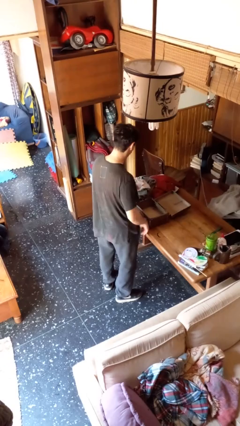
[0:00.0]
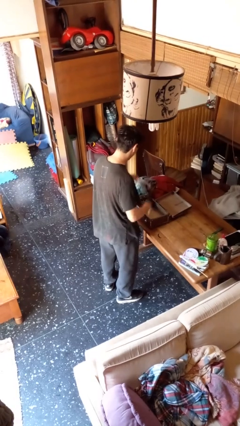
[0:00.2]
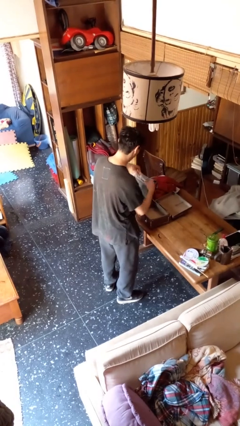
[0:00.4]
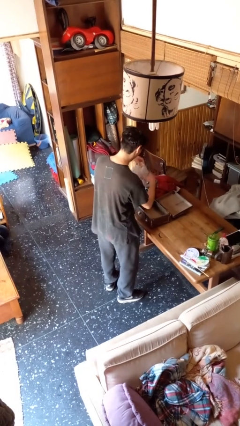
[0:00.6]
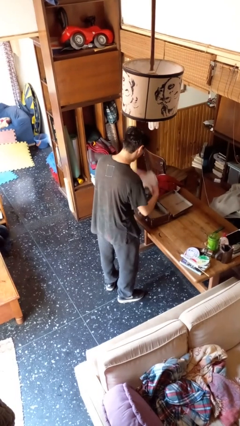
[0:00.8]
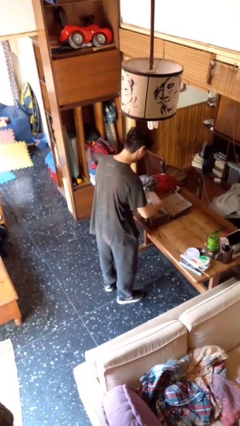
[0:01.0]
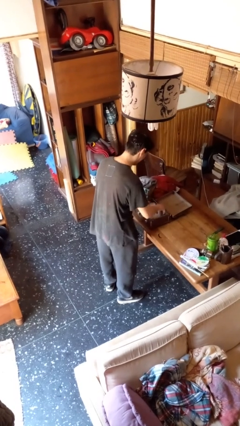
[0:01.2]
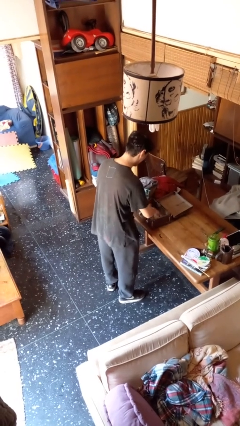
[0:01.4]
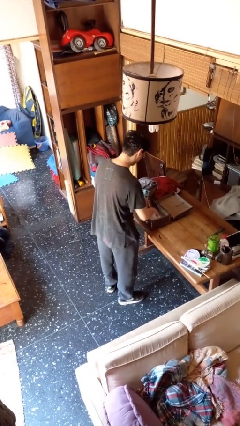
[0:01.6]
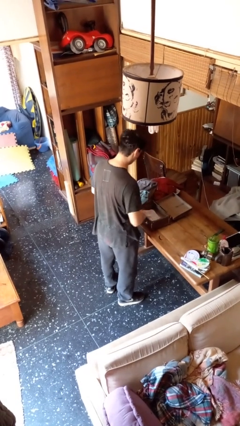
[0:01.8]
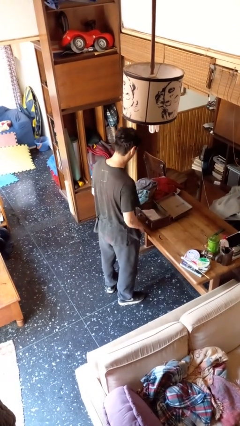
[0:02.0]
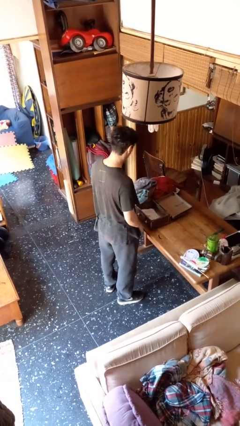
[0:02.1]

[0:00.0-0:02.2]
person loads clothes into suitcase

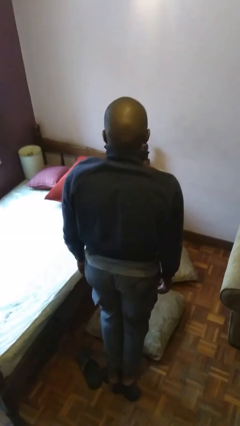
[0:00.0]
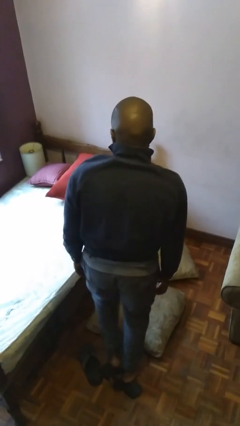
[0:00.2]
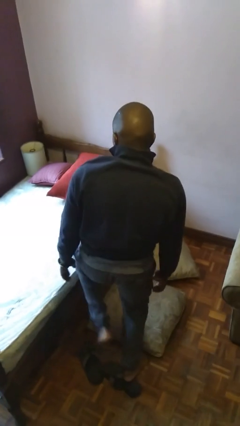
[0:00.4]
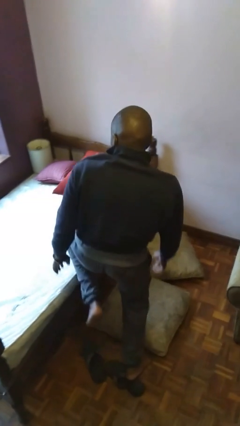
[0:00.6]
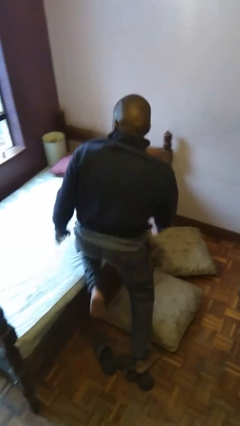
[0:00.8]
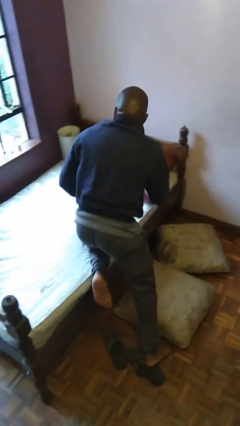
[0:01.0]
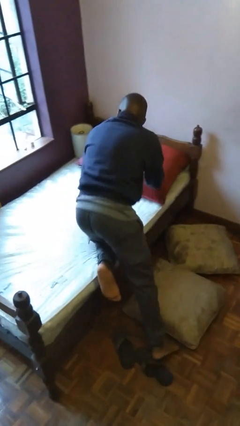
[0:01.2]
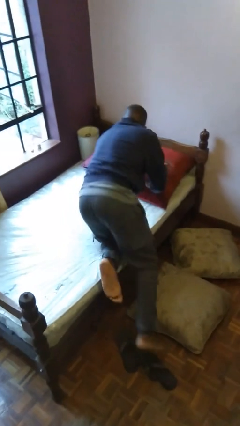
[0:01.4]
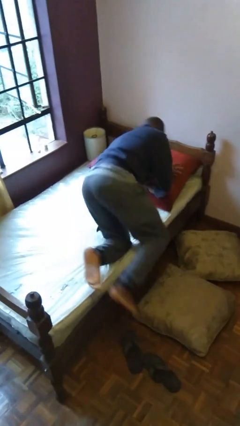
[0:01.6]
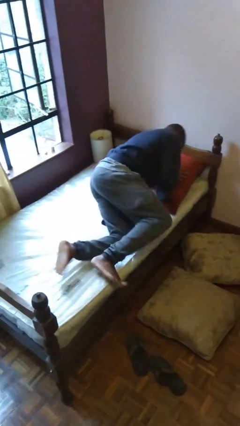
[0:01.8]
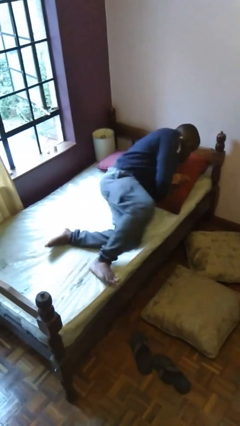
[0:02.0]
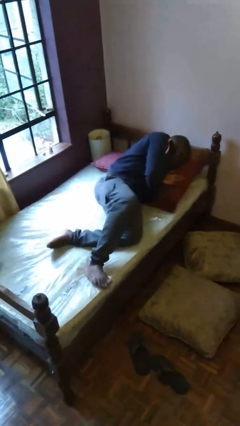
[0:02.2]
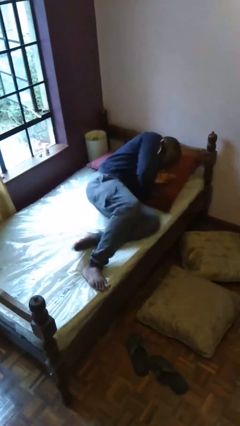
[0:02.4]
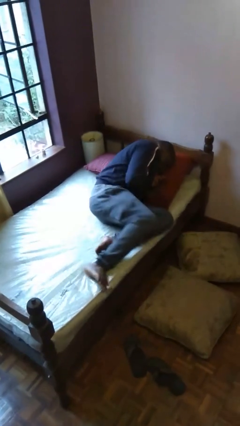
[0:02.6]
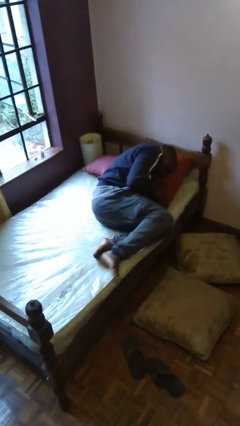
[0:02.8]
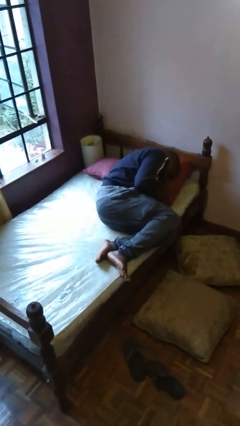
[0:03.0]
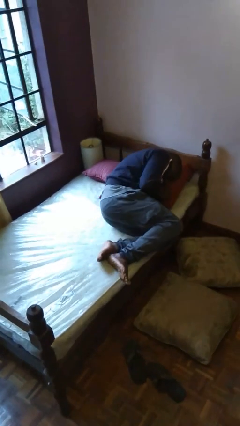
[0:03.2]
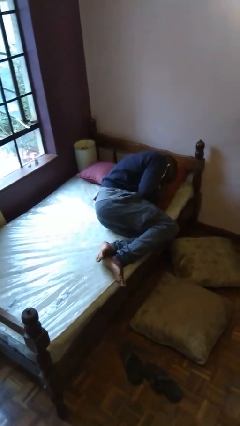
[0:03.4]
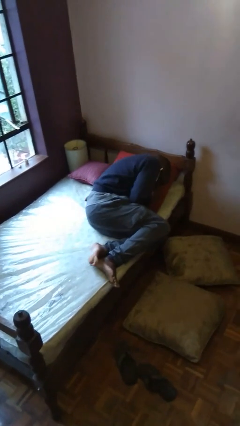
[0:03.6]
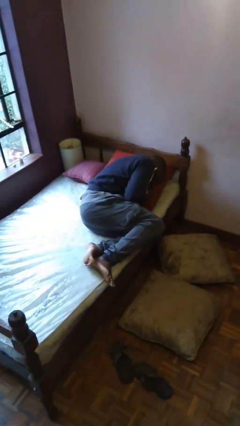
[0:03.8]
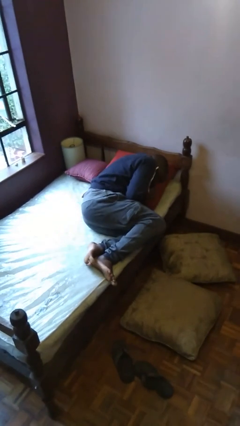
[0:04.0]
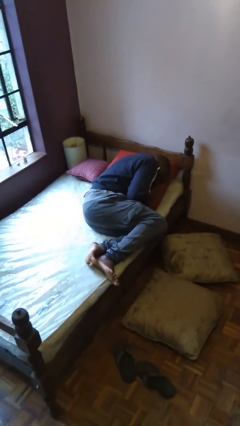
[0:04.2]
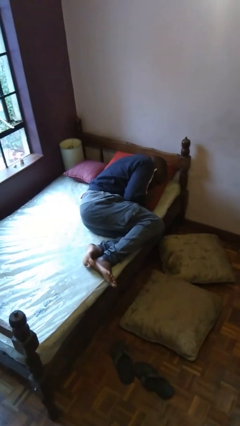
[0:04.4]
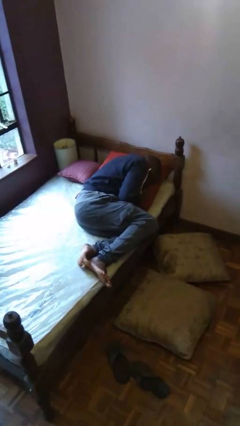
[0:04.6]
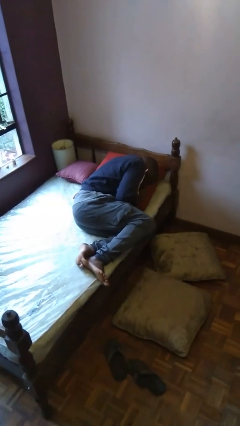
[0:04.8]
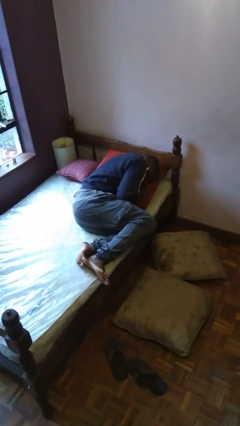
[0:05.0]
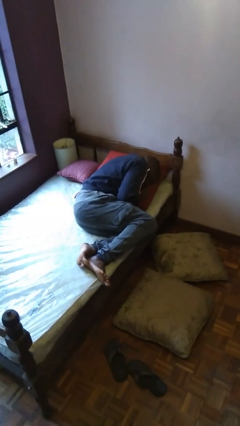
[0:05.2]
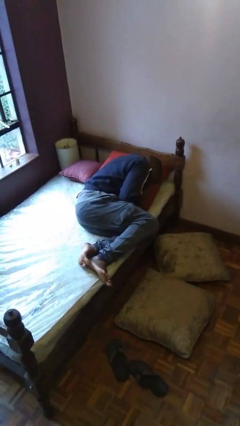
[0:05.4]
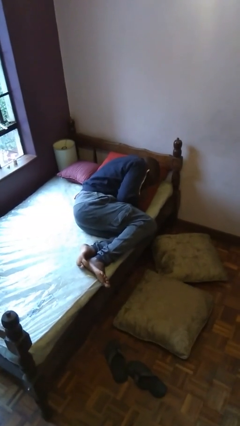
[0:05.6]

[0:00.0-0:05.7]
person lies down on bed

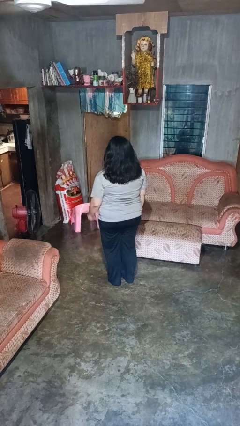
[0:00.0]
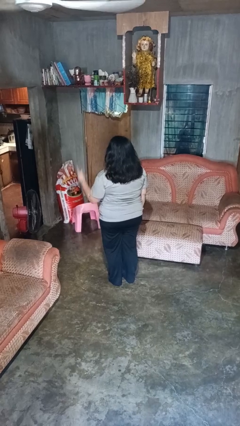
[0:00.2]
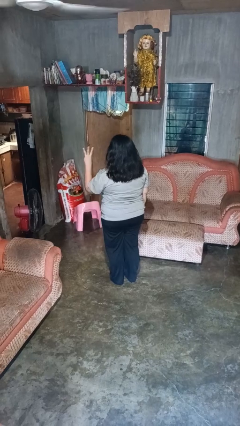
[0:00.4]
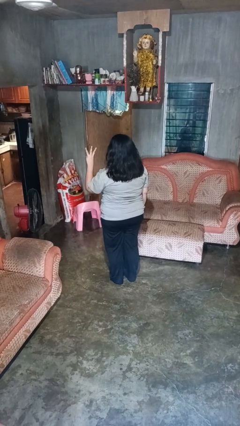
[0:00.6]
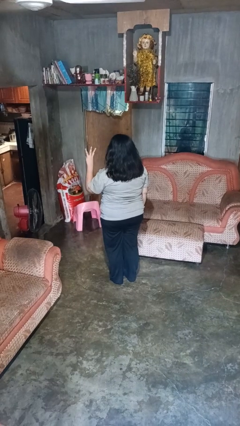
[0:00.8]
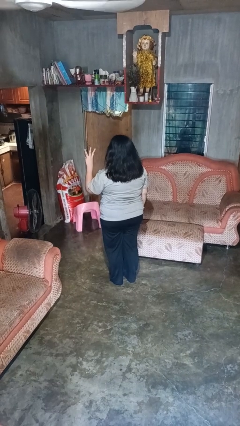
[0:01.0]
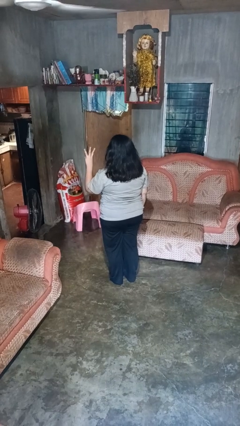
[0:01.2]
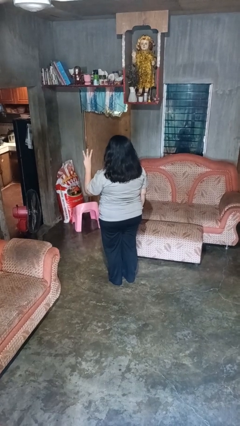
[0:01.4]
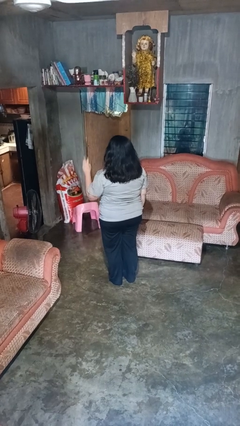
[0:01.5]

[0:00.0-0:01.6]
person gestures number three

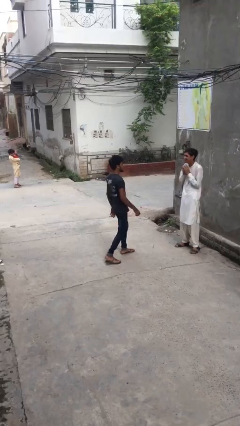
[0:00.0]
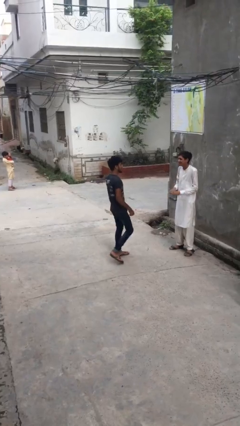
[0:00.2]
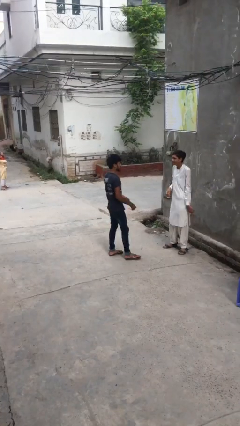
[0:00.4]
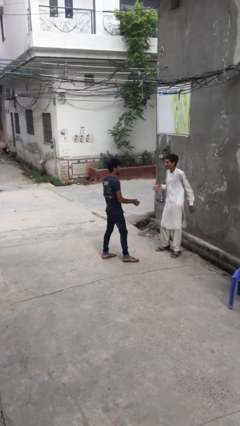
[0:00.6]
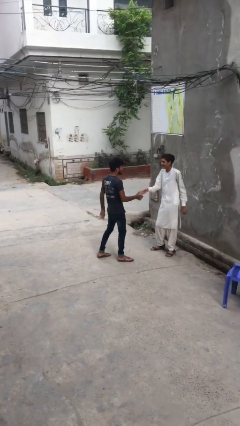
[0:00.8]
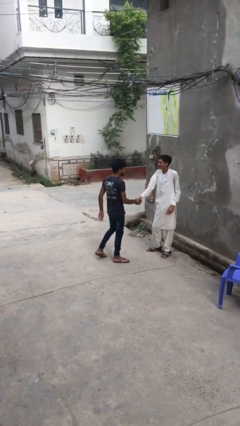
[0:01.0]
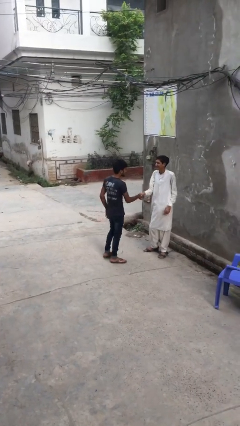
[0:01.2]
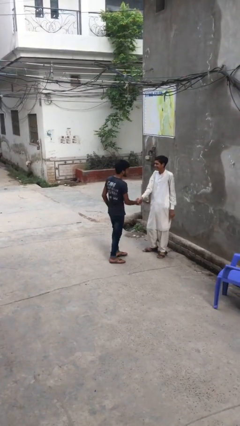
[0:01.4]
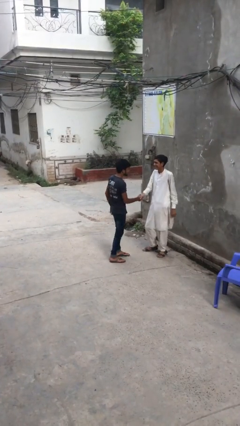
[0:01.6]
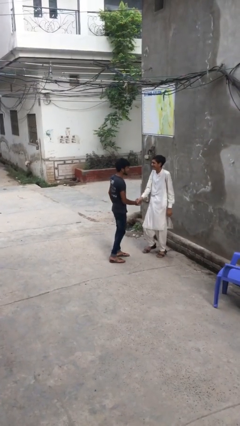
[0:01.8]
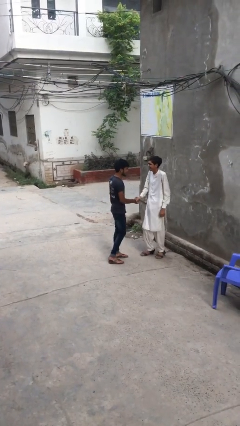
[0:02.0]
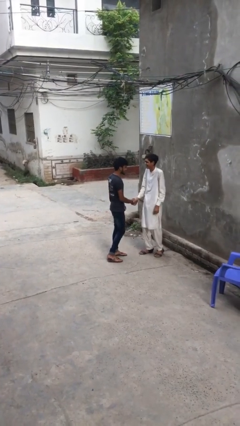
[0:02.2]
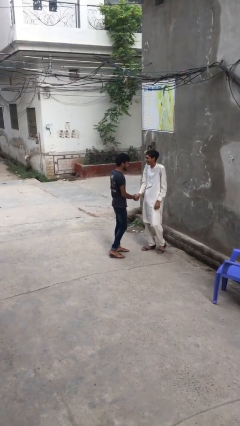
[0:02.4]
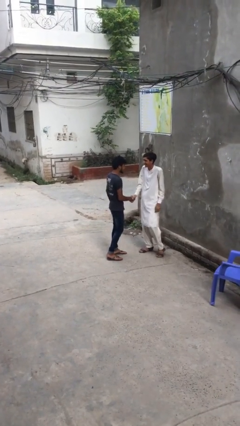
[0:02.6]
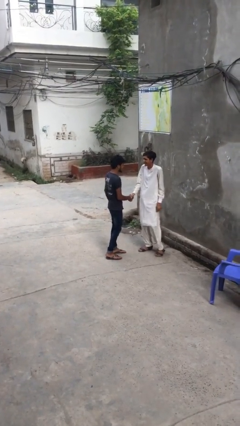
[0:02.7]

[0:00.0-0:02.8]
person shakes hand

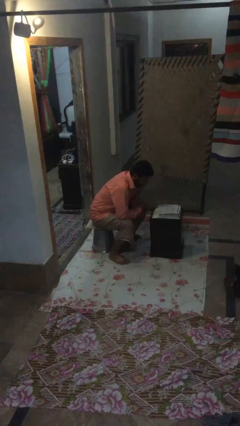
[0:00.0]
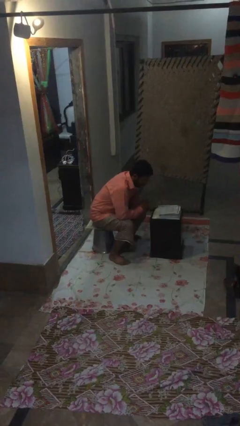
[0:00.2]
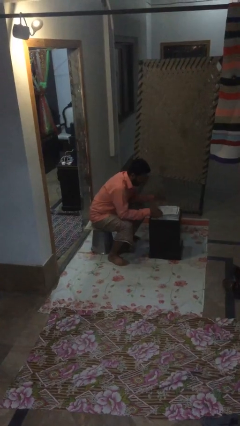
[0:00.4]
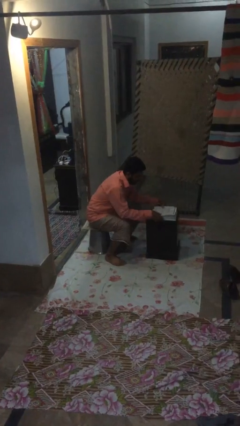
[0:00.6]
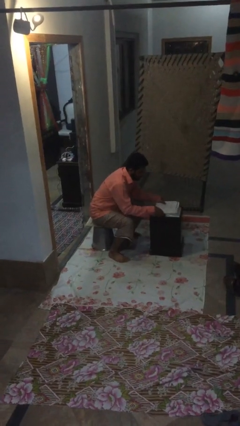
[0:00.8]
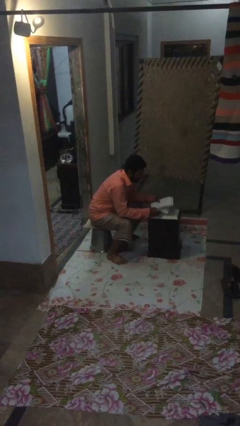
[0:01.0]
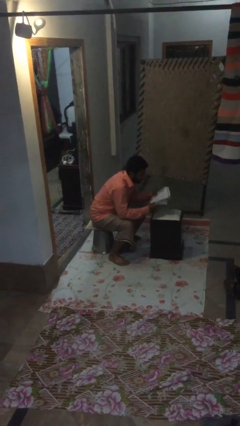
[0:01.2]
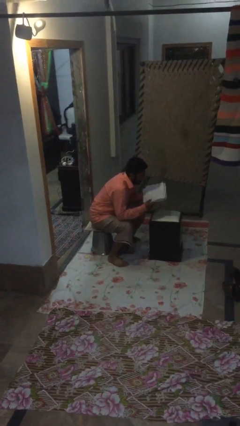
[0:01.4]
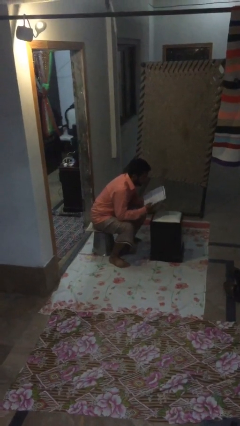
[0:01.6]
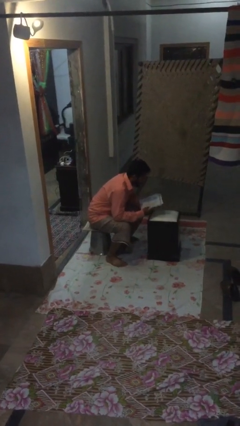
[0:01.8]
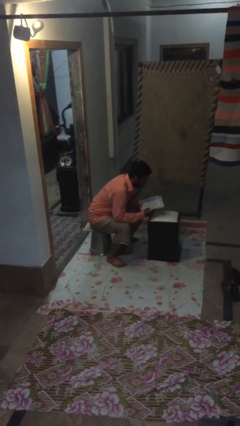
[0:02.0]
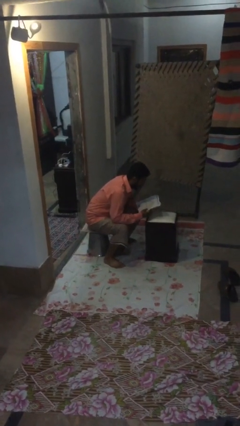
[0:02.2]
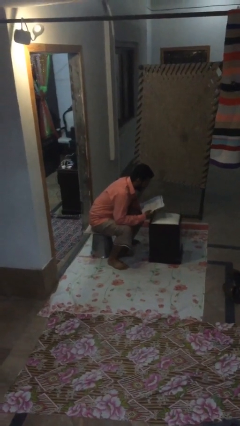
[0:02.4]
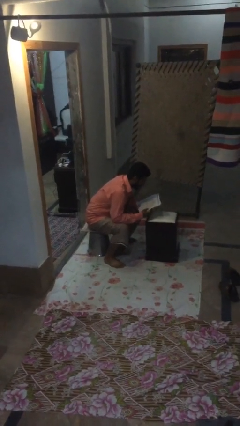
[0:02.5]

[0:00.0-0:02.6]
person picks up object from table

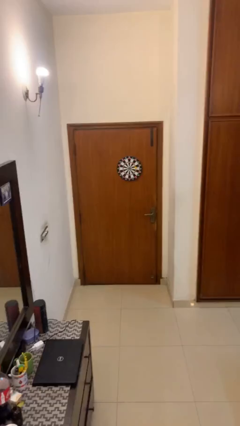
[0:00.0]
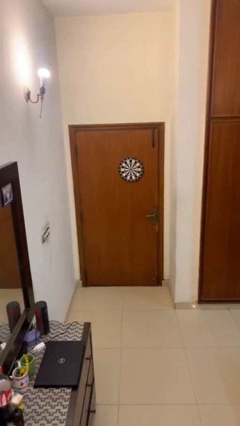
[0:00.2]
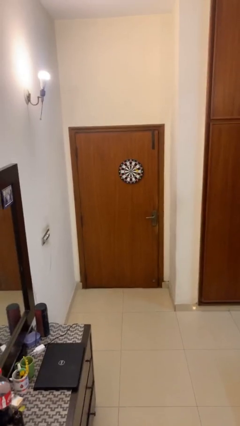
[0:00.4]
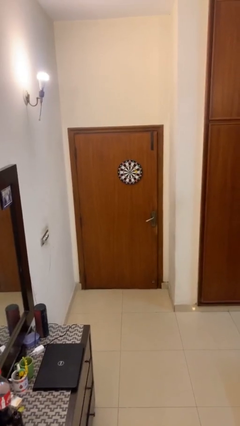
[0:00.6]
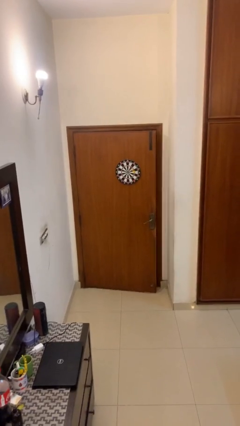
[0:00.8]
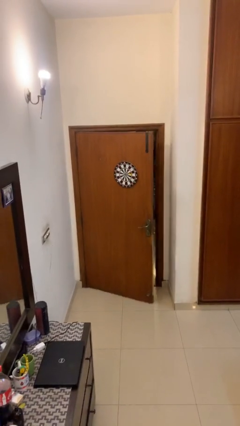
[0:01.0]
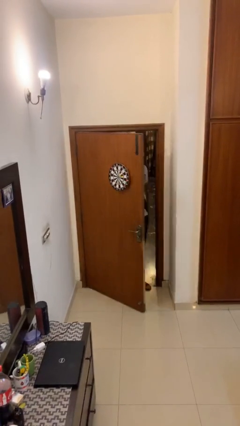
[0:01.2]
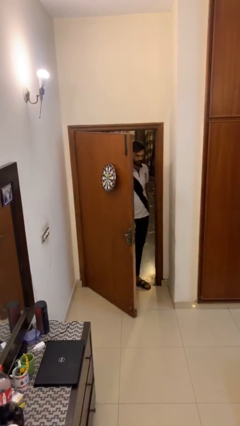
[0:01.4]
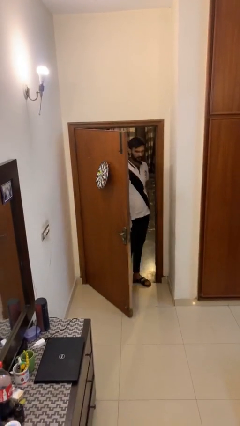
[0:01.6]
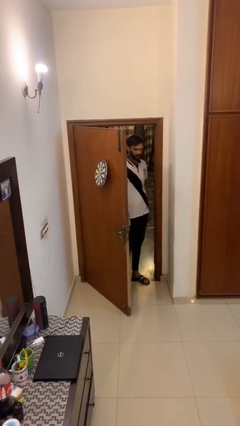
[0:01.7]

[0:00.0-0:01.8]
person opens facility door

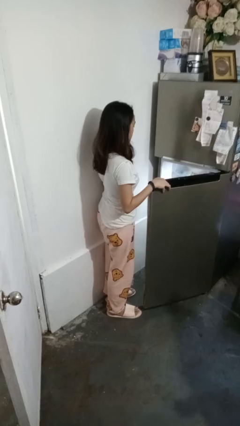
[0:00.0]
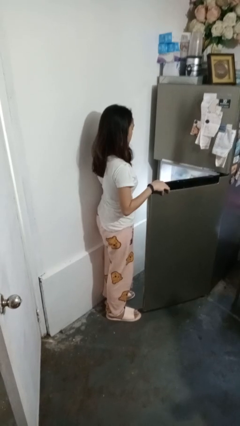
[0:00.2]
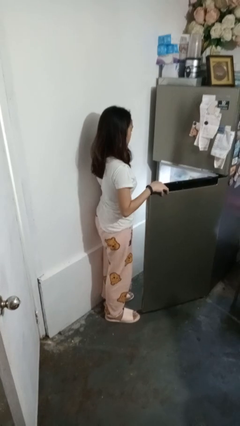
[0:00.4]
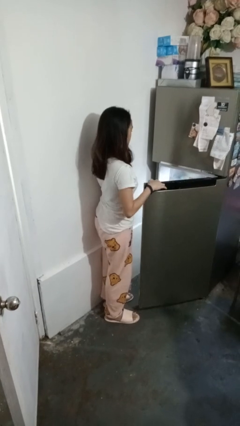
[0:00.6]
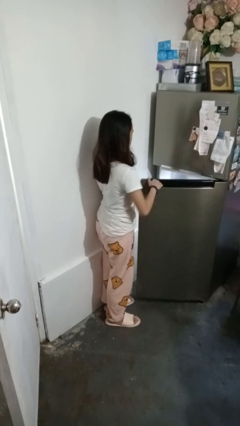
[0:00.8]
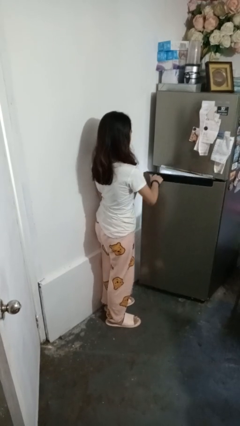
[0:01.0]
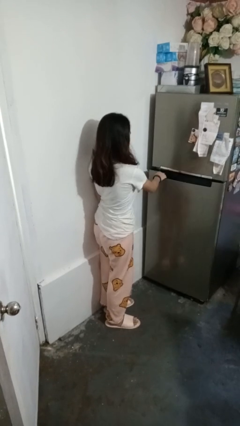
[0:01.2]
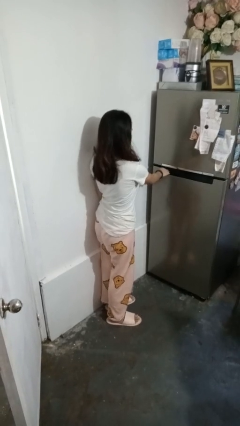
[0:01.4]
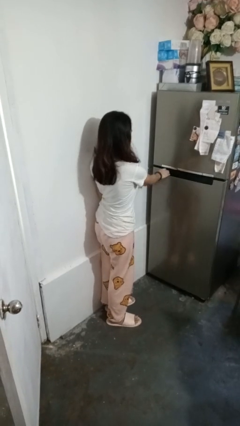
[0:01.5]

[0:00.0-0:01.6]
person closes refrigerator
